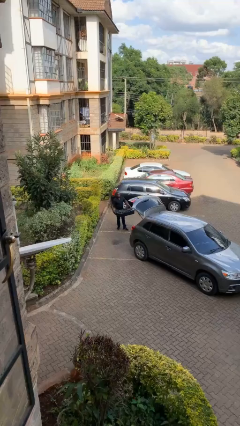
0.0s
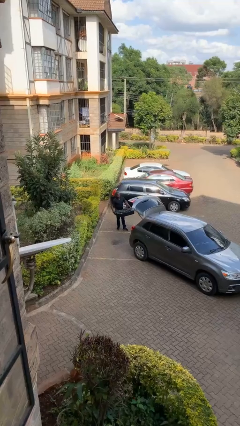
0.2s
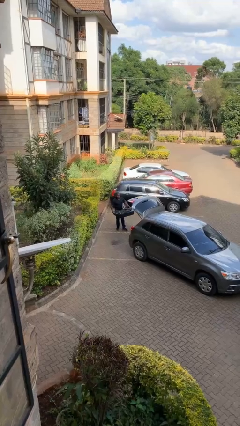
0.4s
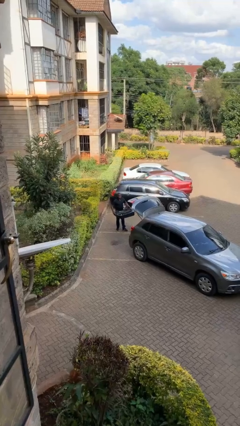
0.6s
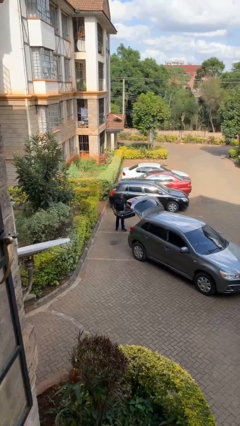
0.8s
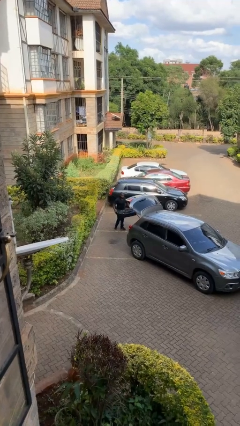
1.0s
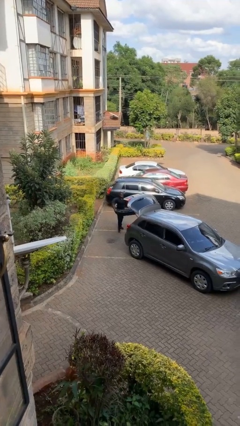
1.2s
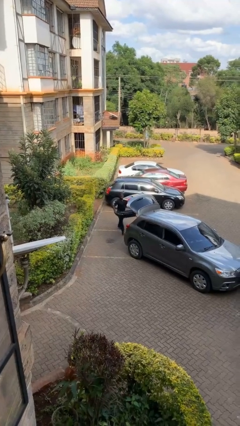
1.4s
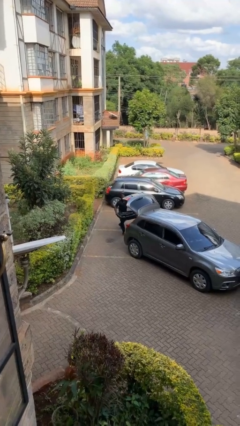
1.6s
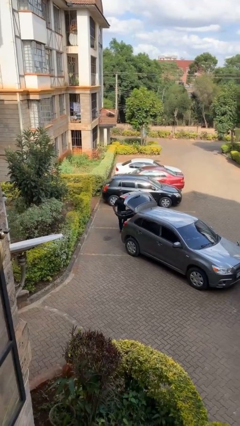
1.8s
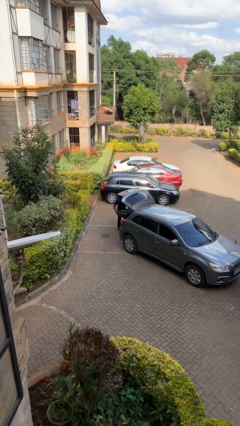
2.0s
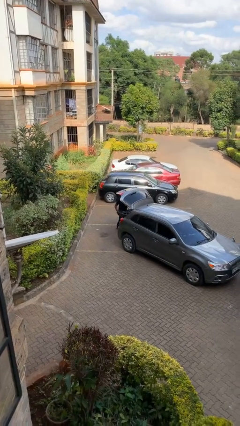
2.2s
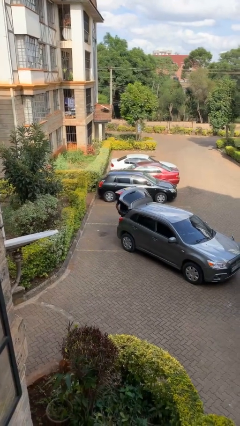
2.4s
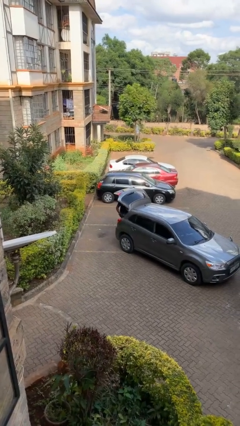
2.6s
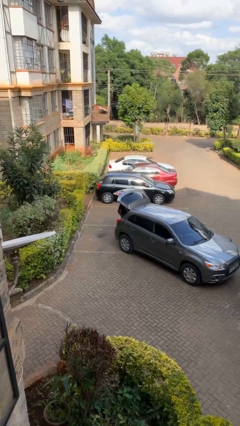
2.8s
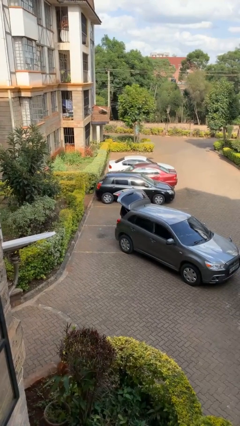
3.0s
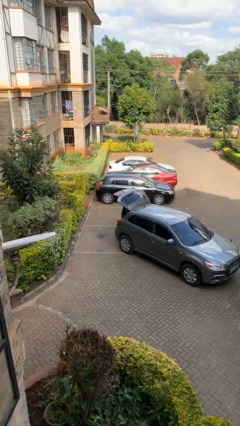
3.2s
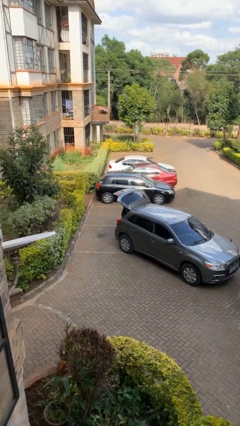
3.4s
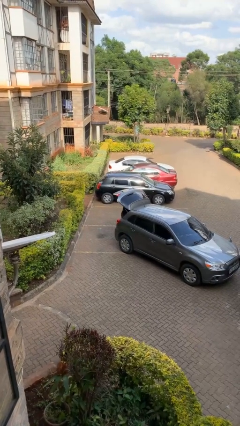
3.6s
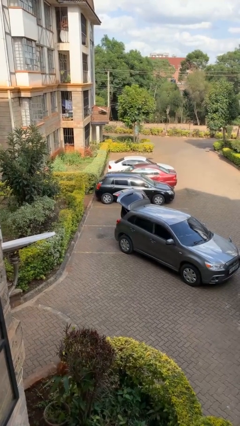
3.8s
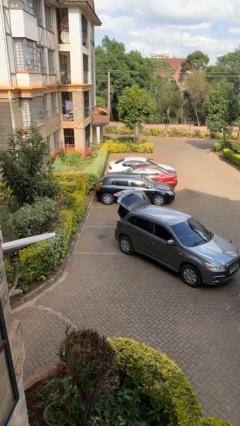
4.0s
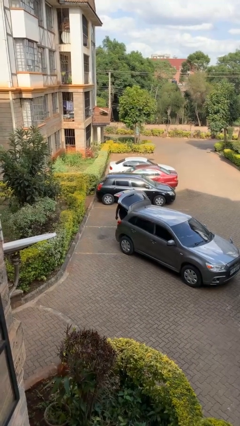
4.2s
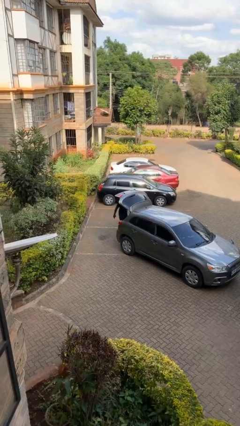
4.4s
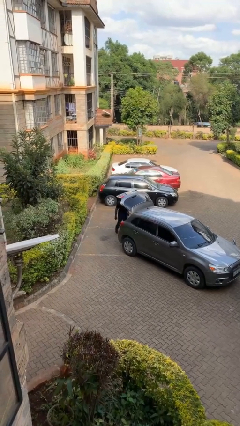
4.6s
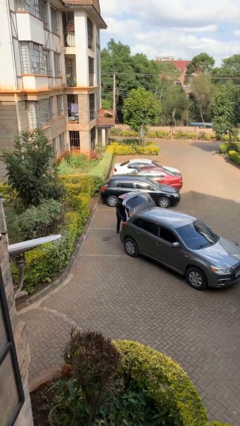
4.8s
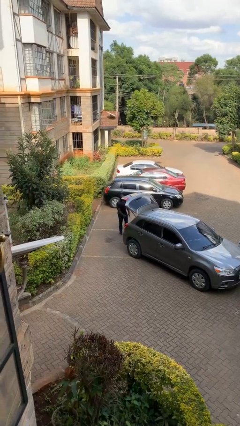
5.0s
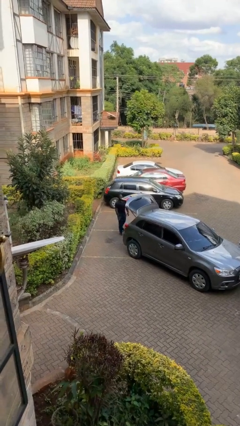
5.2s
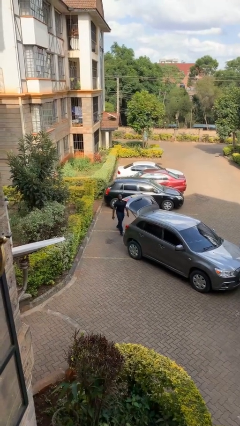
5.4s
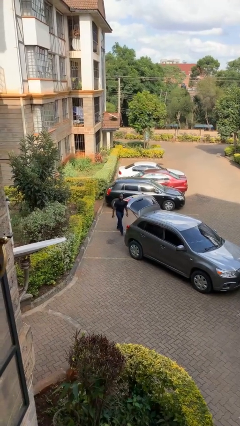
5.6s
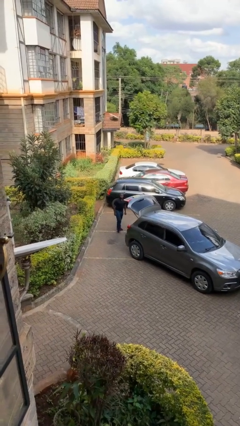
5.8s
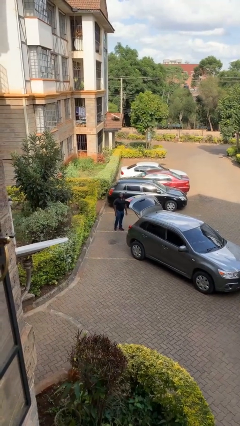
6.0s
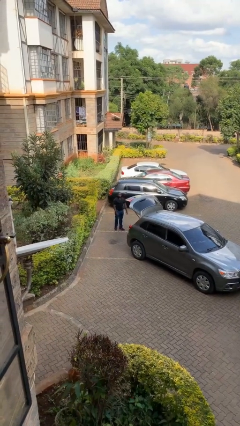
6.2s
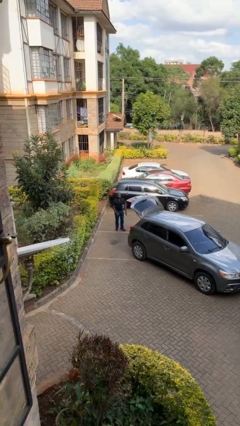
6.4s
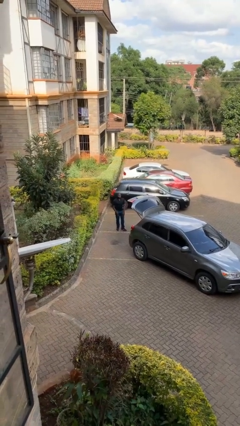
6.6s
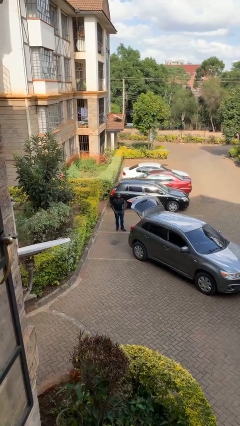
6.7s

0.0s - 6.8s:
person loads car

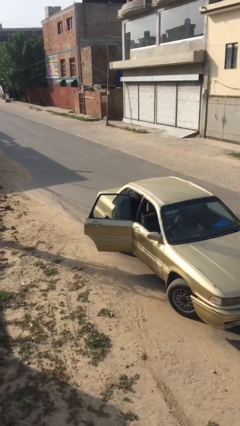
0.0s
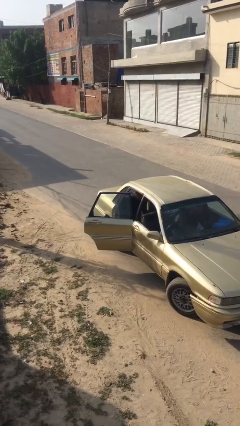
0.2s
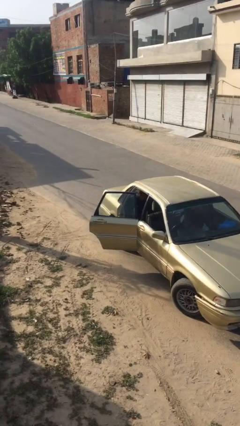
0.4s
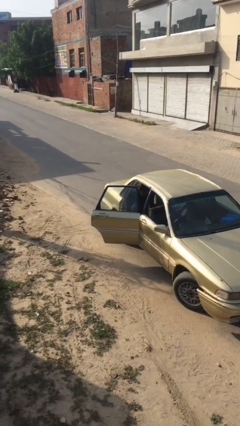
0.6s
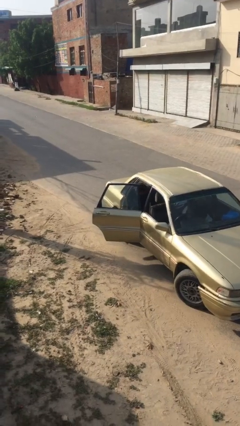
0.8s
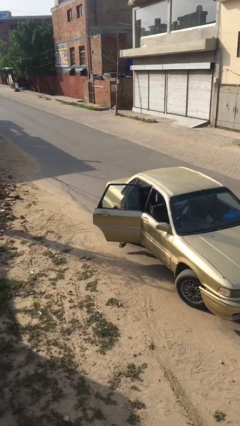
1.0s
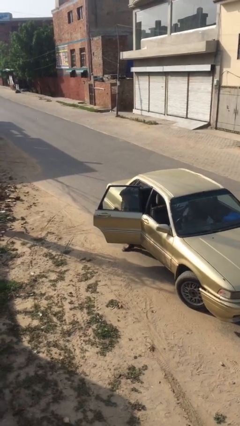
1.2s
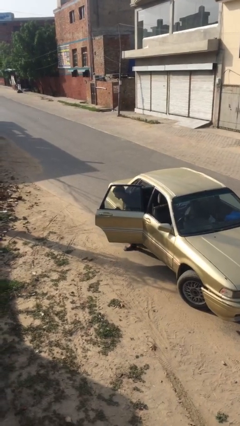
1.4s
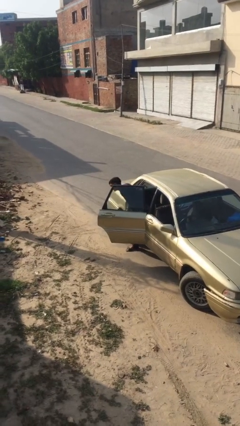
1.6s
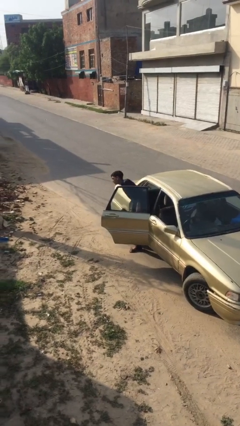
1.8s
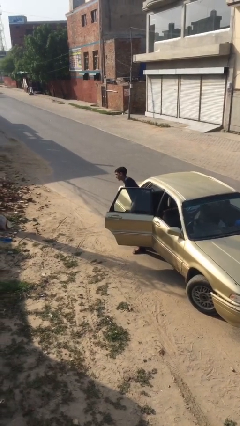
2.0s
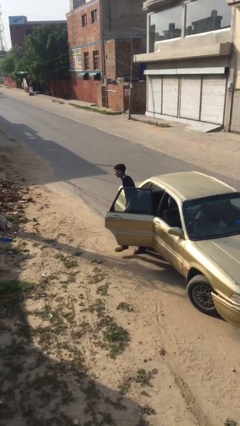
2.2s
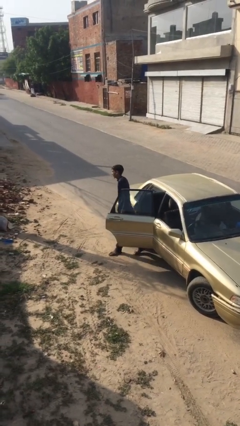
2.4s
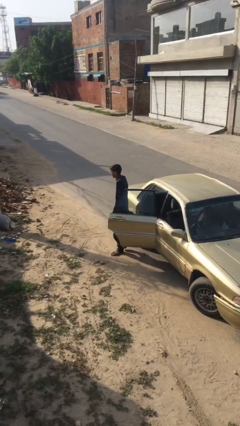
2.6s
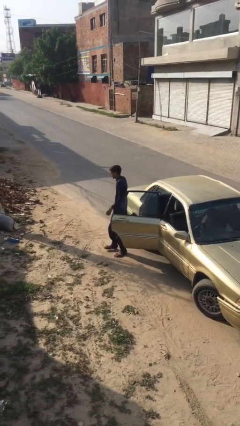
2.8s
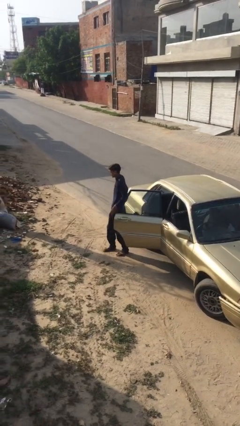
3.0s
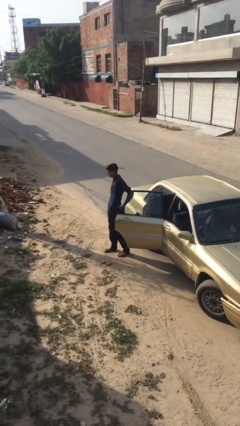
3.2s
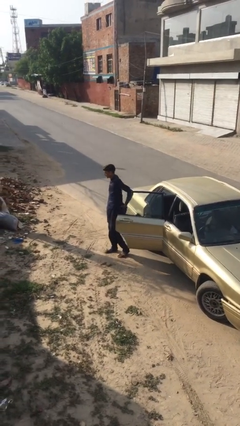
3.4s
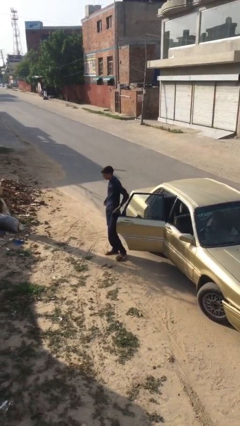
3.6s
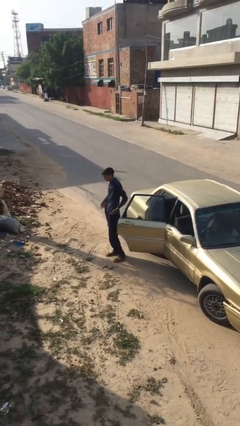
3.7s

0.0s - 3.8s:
person exits car

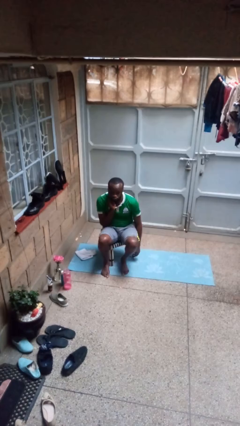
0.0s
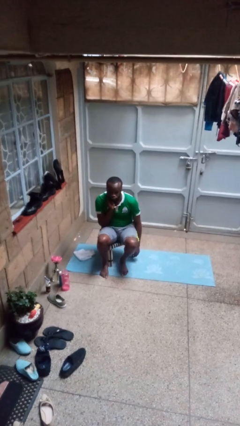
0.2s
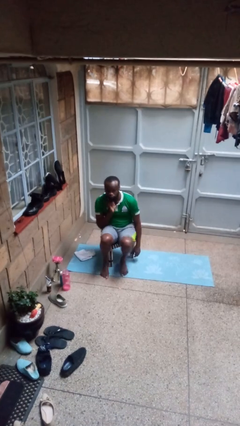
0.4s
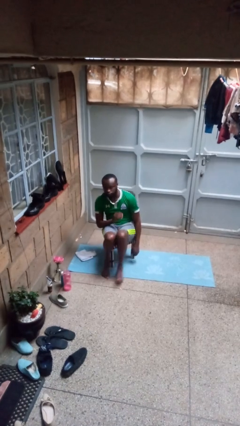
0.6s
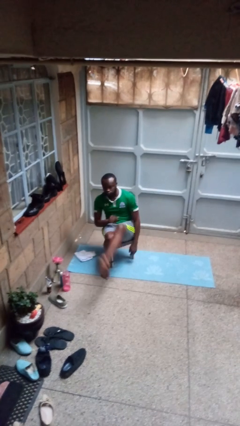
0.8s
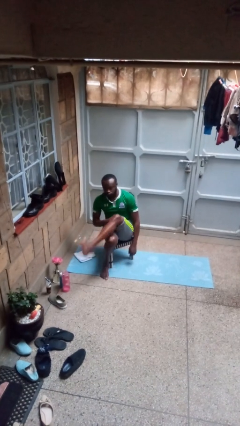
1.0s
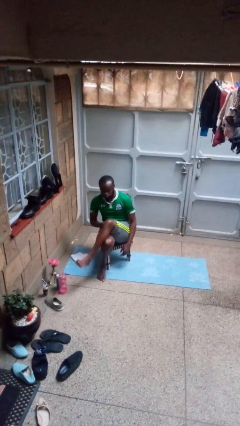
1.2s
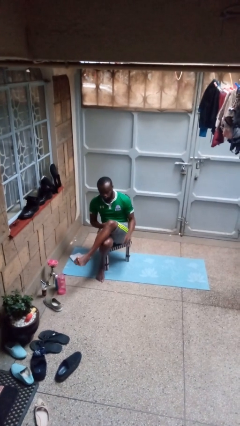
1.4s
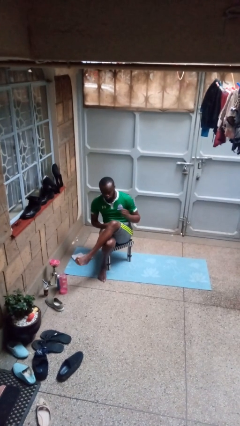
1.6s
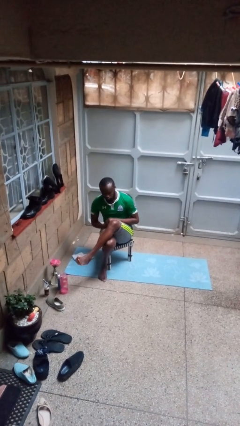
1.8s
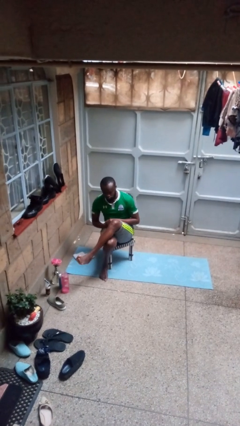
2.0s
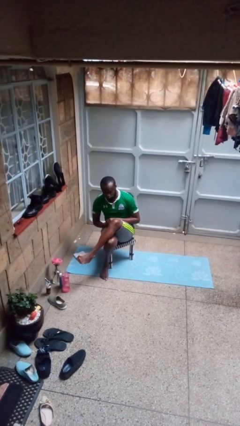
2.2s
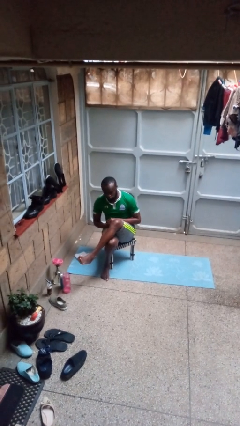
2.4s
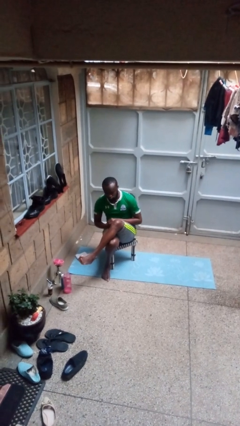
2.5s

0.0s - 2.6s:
person crosses legs

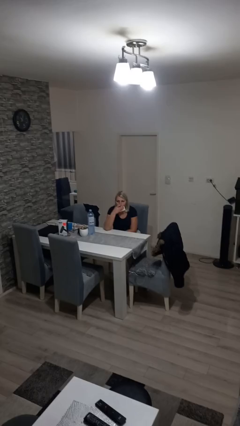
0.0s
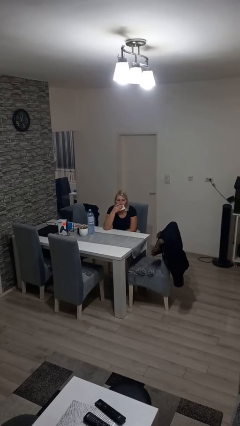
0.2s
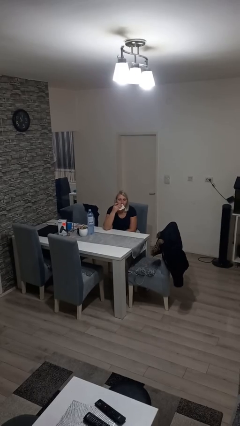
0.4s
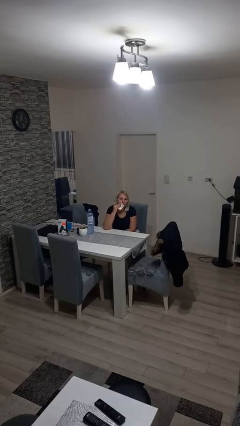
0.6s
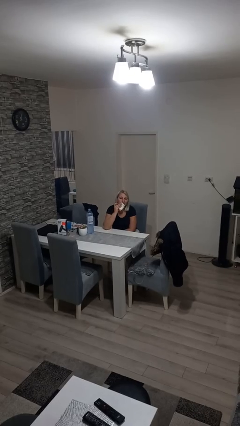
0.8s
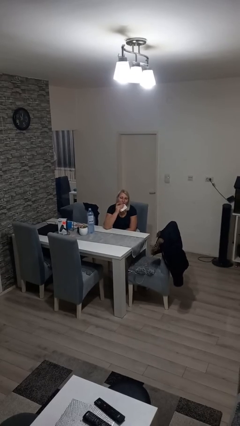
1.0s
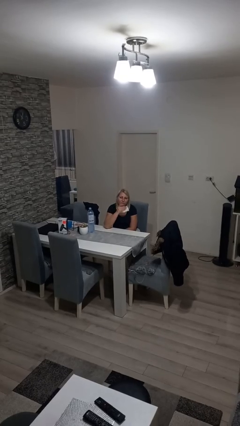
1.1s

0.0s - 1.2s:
person wipes mouth with napkin

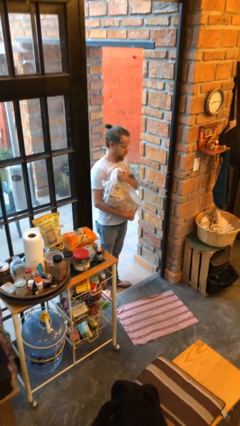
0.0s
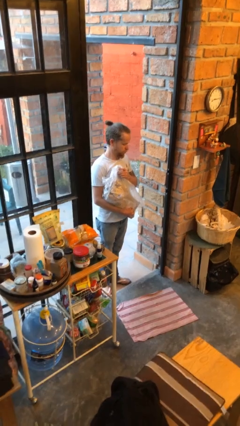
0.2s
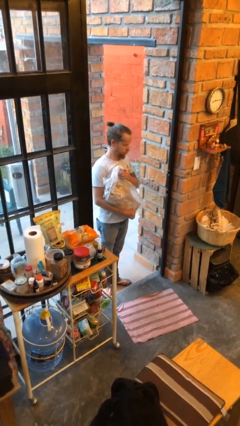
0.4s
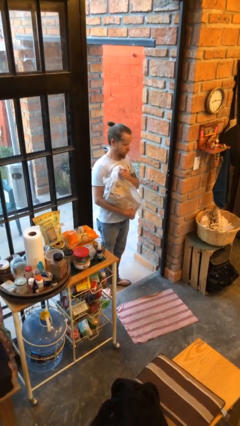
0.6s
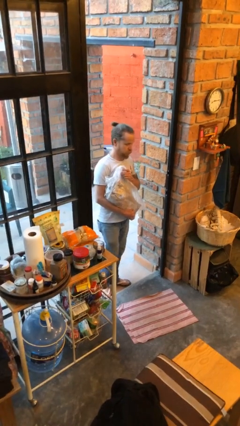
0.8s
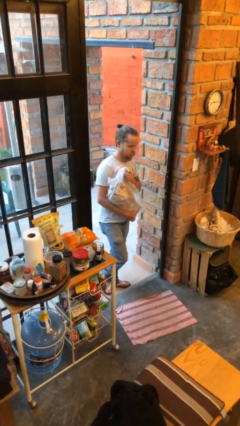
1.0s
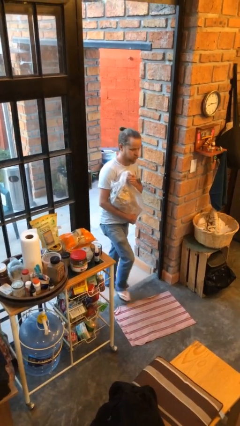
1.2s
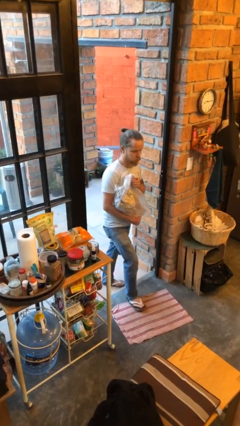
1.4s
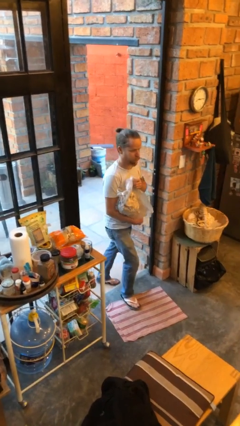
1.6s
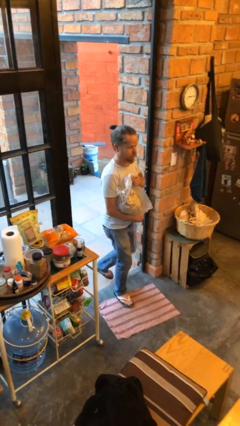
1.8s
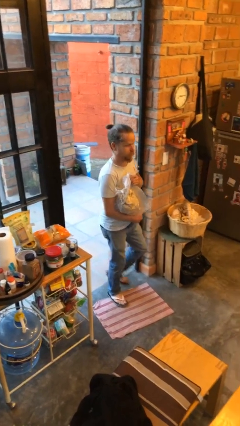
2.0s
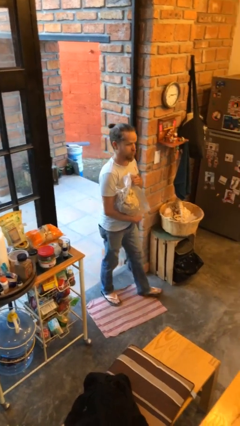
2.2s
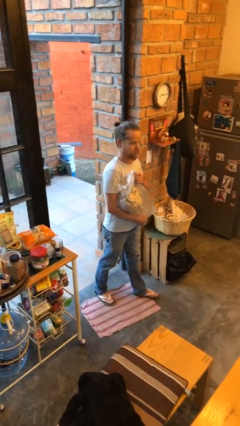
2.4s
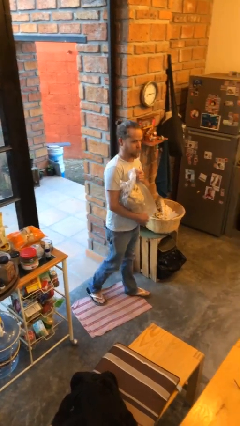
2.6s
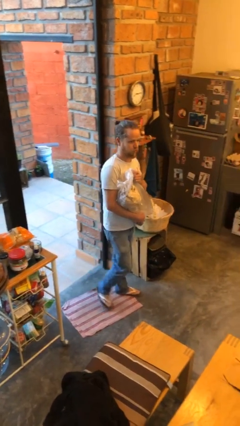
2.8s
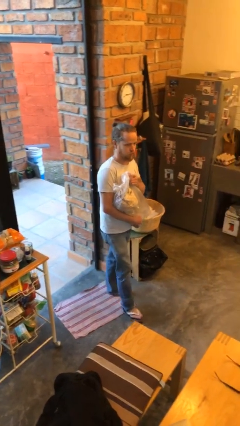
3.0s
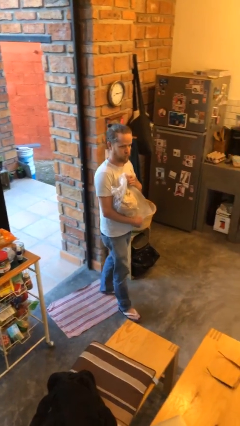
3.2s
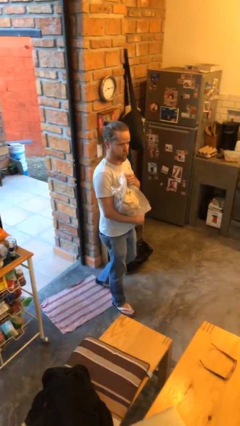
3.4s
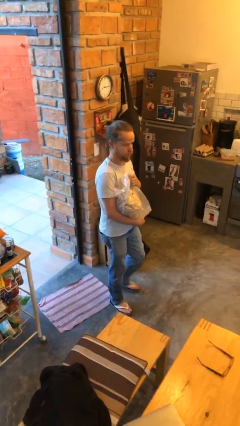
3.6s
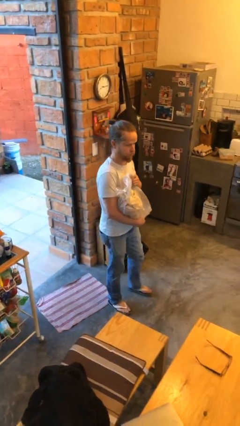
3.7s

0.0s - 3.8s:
person carries groceries
